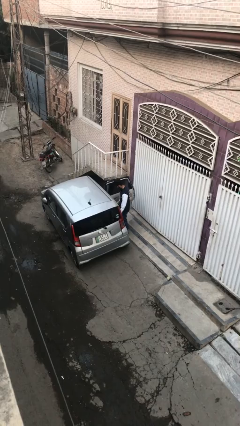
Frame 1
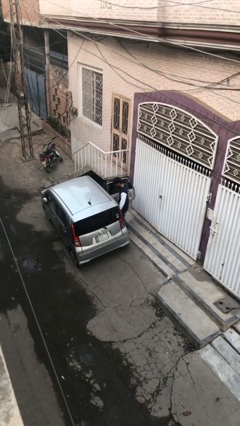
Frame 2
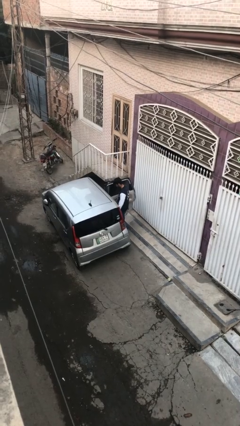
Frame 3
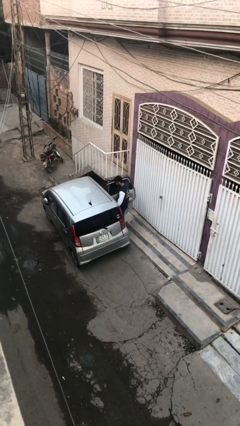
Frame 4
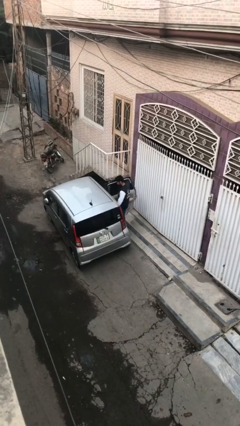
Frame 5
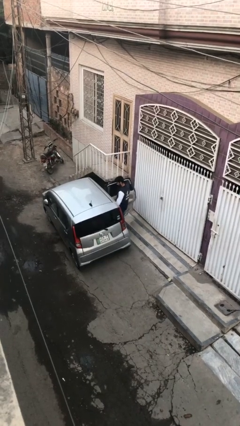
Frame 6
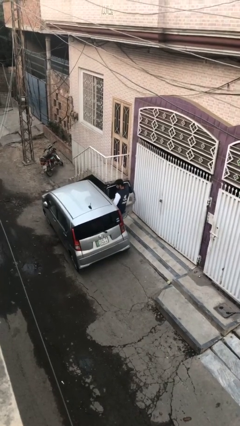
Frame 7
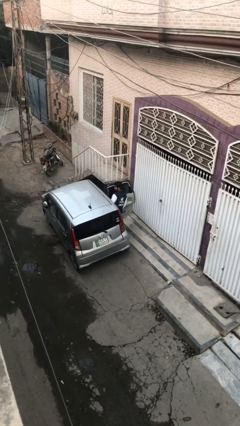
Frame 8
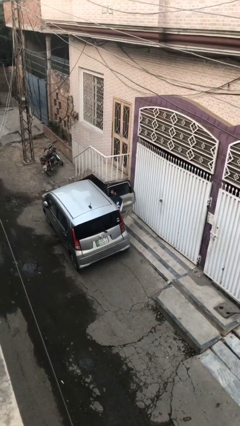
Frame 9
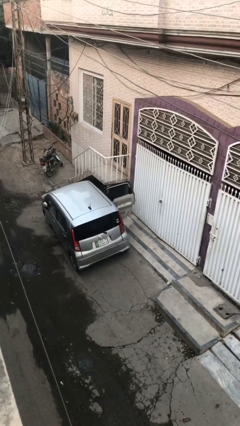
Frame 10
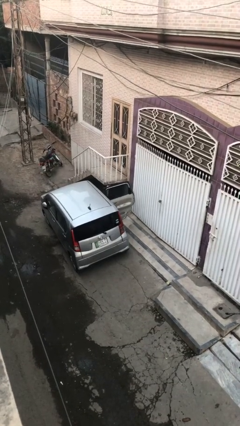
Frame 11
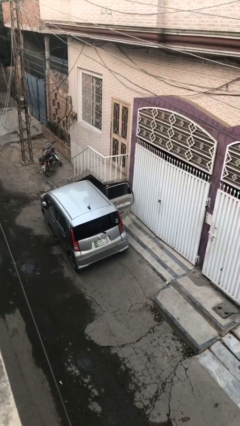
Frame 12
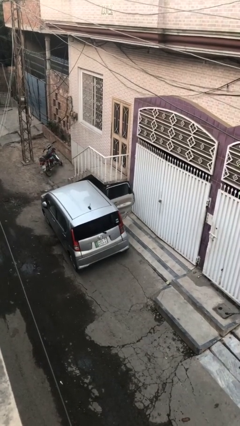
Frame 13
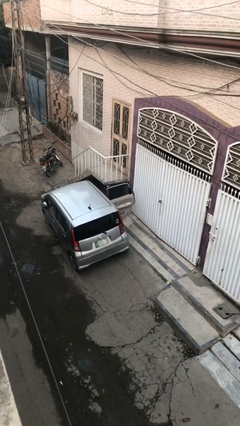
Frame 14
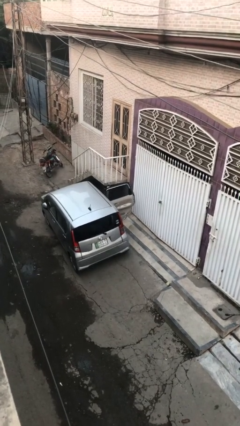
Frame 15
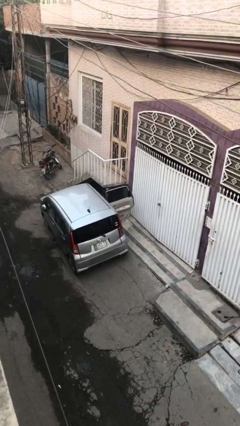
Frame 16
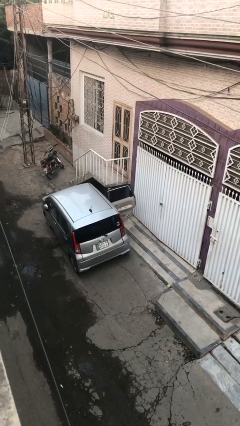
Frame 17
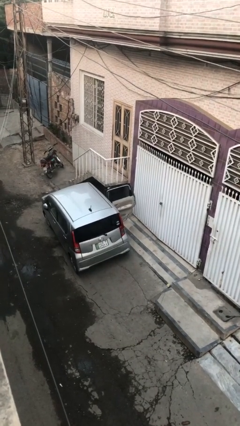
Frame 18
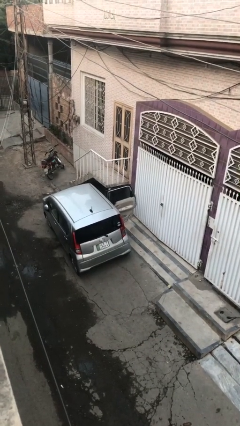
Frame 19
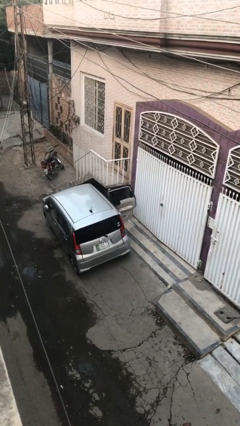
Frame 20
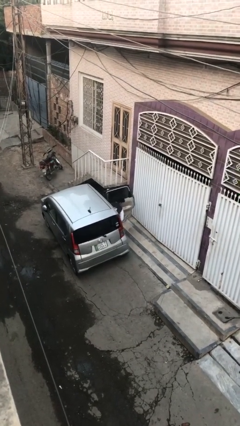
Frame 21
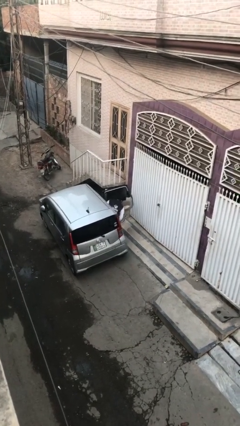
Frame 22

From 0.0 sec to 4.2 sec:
person enters car

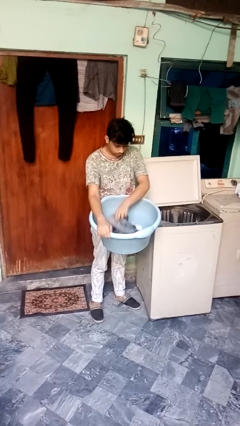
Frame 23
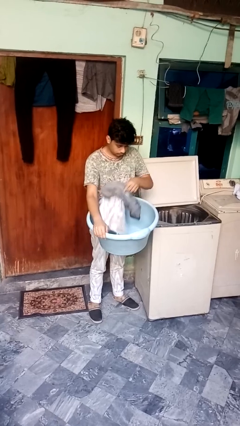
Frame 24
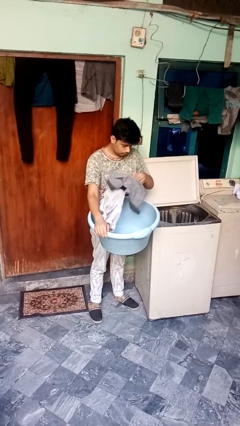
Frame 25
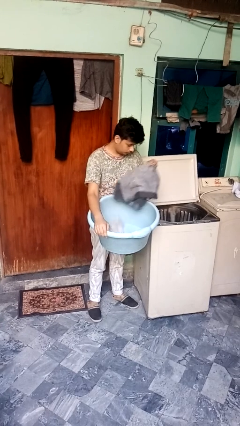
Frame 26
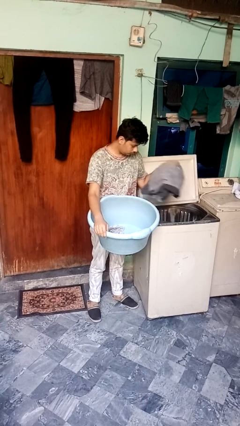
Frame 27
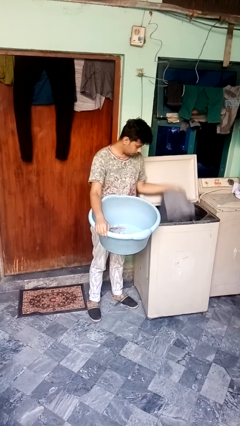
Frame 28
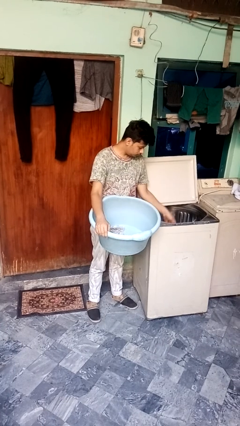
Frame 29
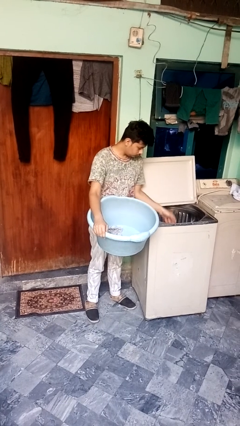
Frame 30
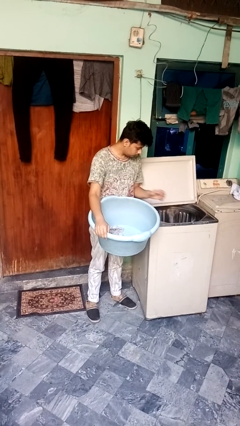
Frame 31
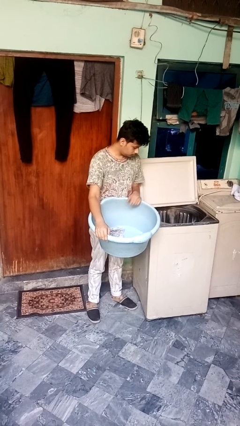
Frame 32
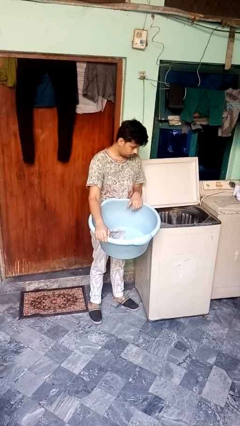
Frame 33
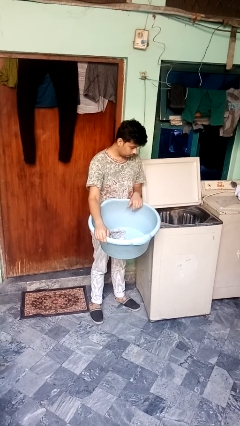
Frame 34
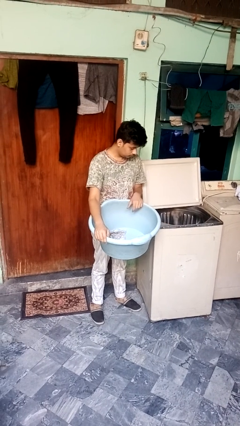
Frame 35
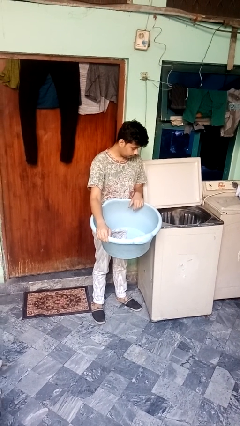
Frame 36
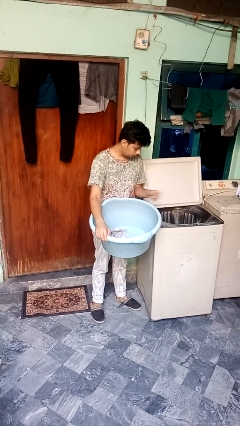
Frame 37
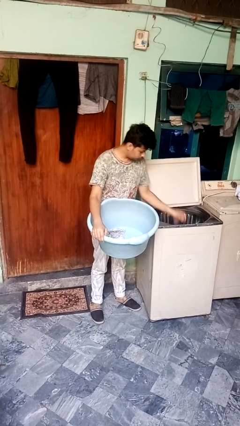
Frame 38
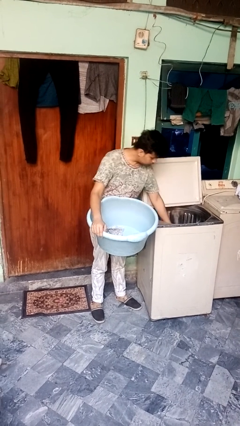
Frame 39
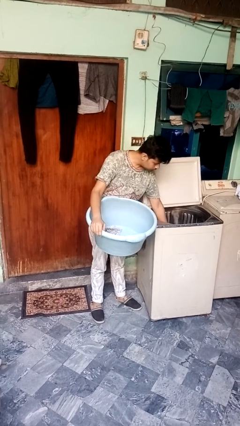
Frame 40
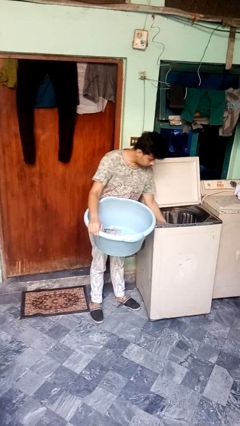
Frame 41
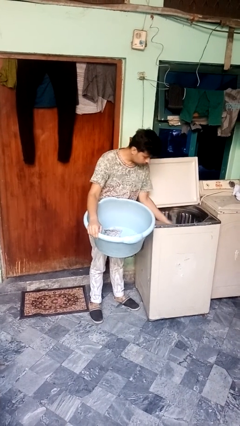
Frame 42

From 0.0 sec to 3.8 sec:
person unloads clotheswasher

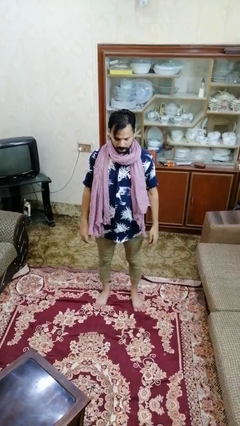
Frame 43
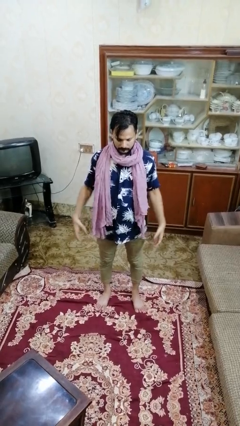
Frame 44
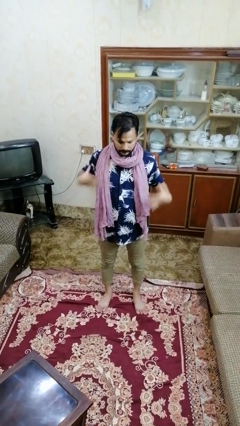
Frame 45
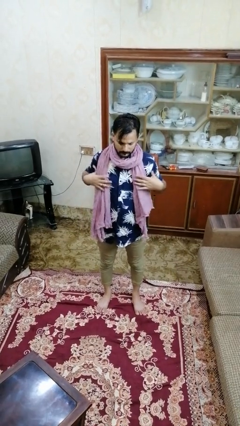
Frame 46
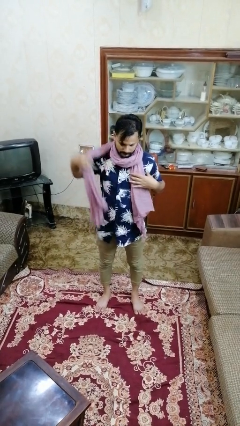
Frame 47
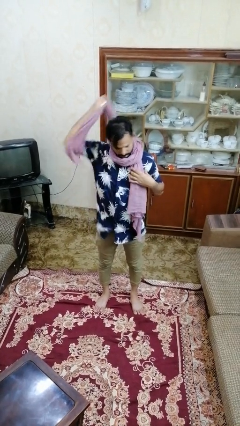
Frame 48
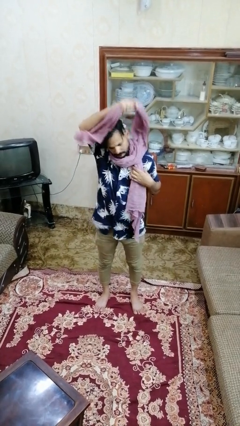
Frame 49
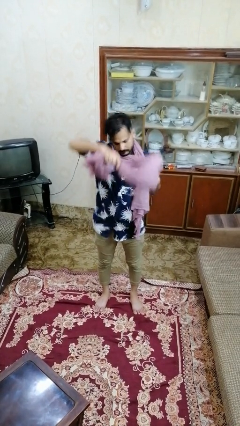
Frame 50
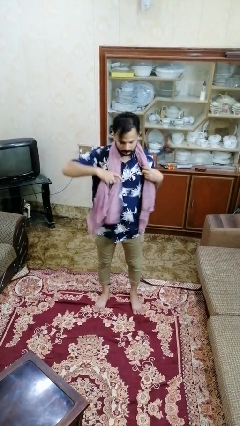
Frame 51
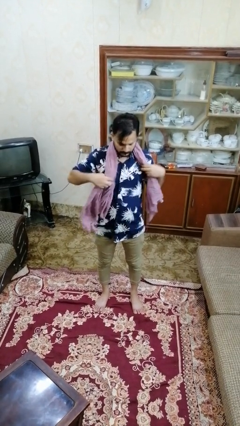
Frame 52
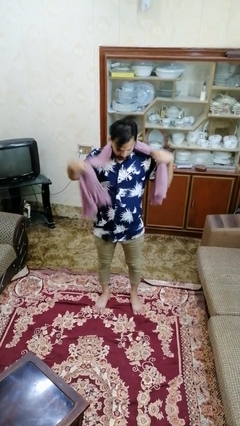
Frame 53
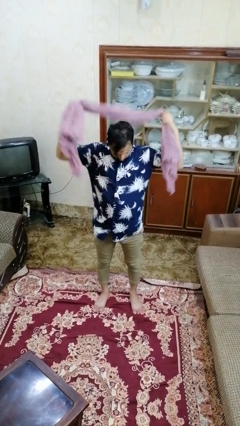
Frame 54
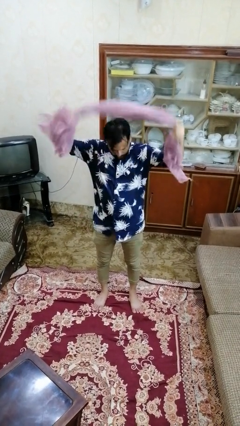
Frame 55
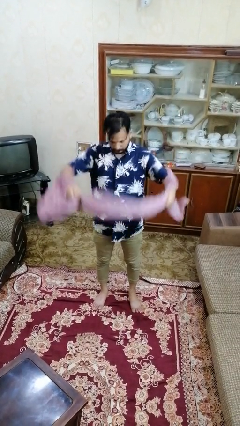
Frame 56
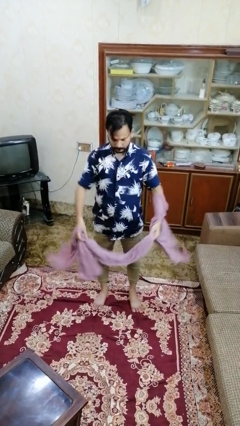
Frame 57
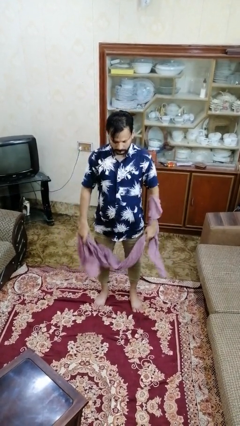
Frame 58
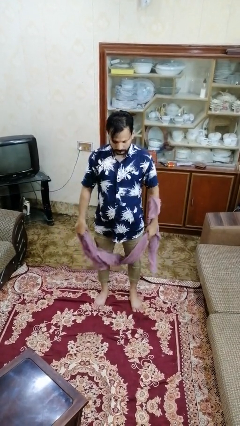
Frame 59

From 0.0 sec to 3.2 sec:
person takes off scarf

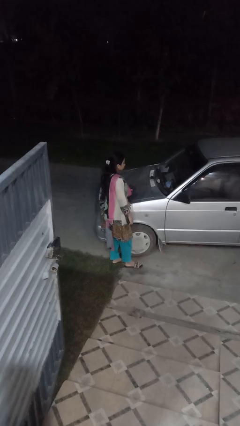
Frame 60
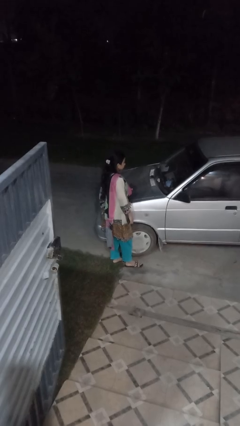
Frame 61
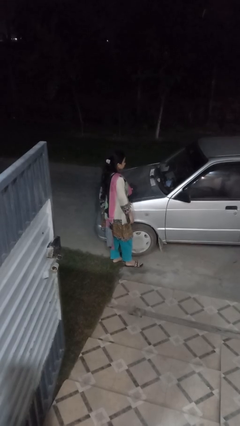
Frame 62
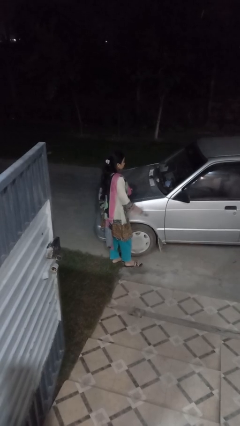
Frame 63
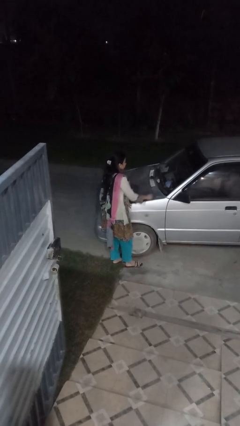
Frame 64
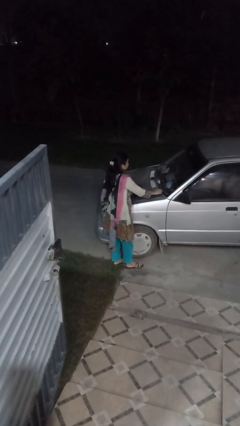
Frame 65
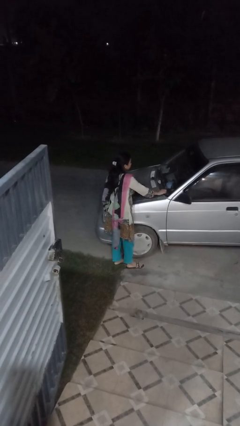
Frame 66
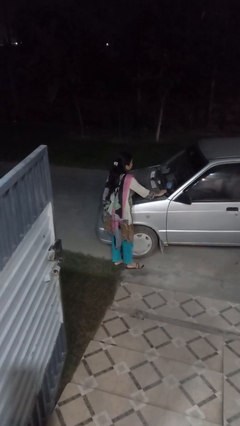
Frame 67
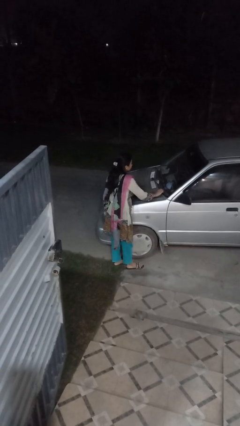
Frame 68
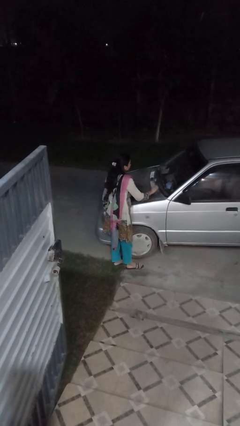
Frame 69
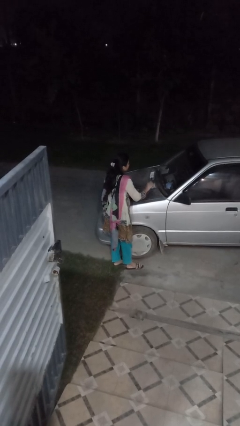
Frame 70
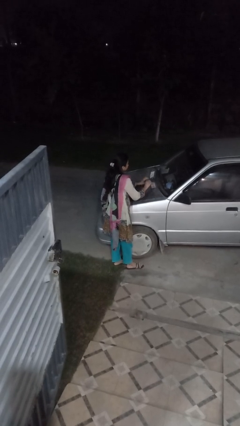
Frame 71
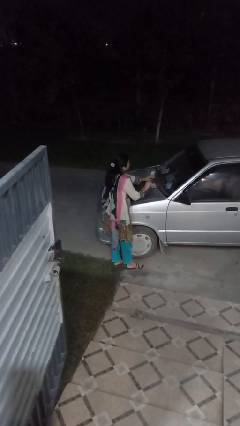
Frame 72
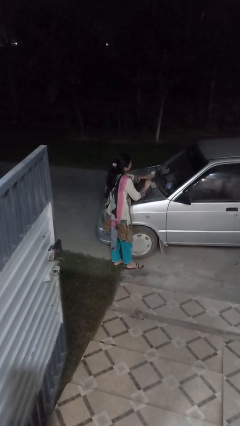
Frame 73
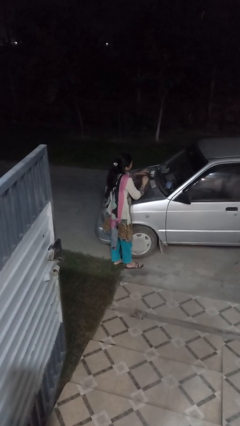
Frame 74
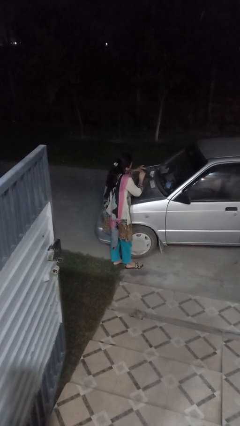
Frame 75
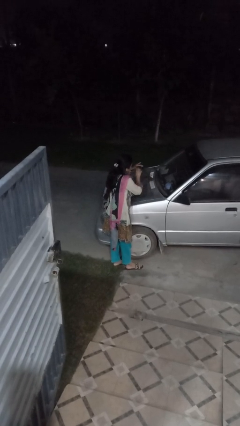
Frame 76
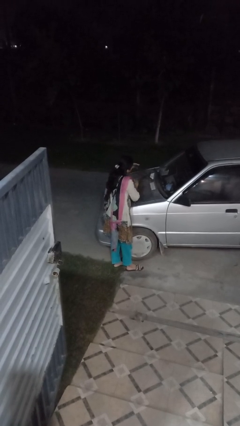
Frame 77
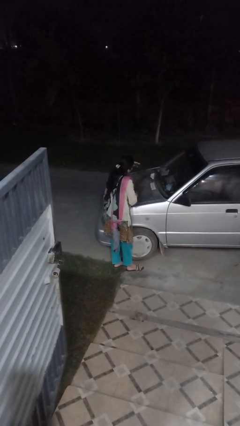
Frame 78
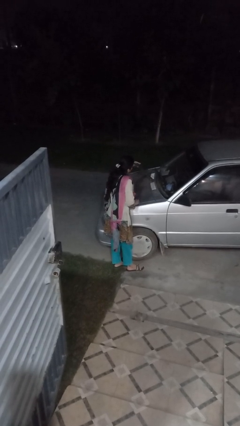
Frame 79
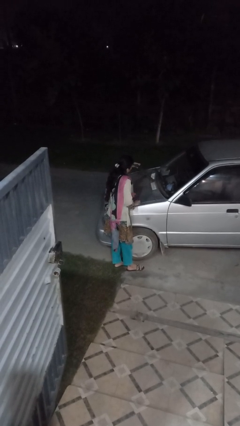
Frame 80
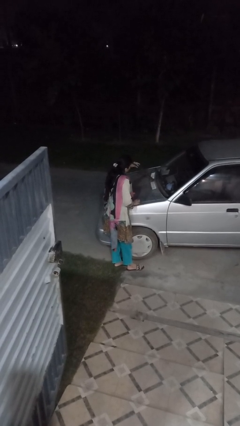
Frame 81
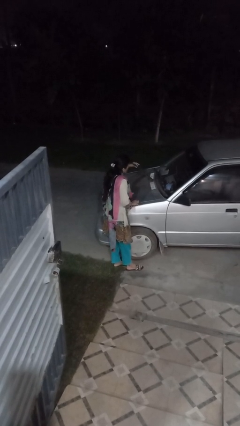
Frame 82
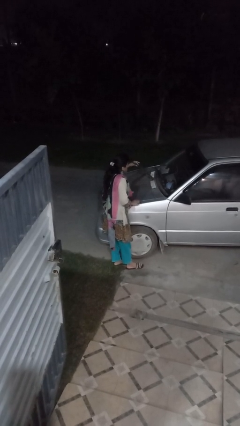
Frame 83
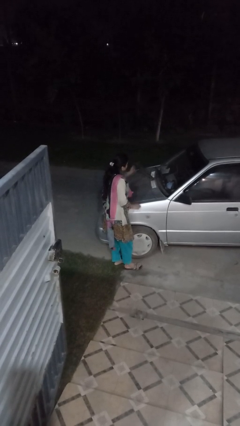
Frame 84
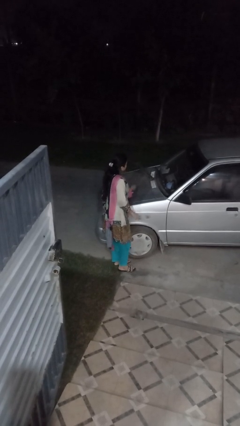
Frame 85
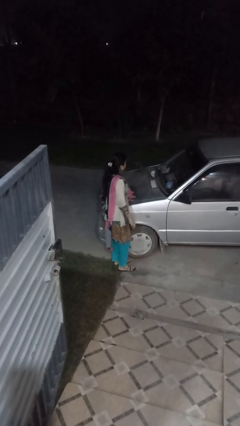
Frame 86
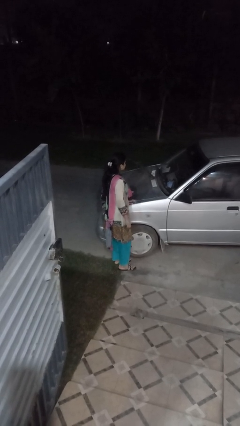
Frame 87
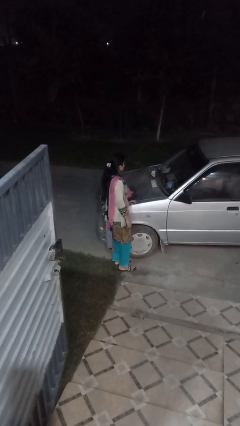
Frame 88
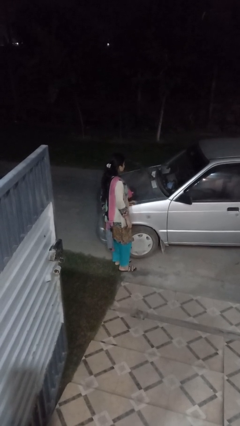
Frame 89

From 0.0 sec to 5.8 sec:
person flips up car wipers

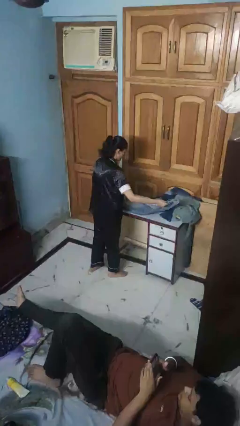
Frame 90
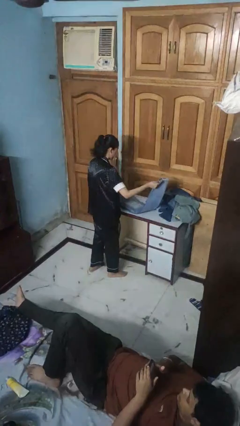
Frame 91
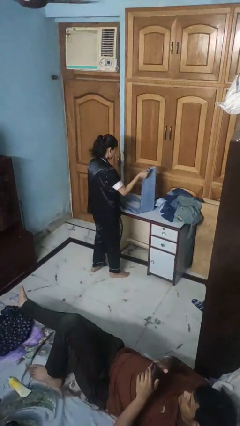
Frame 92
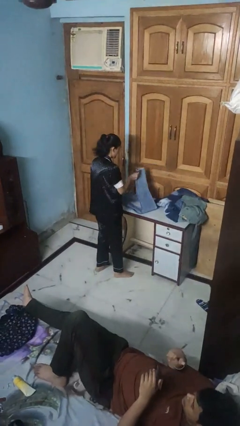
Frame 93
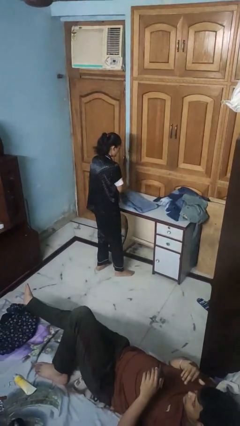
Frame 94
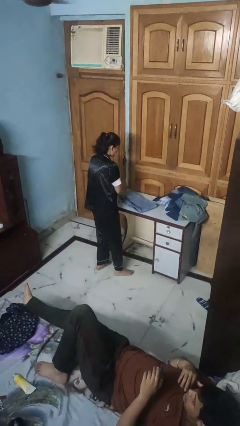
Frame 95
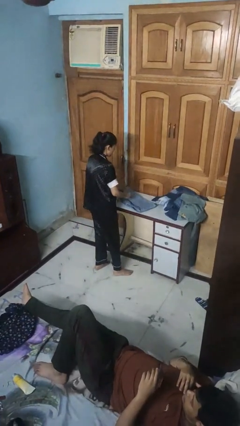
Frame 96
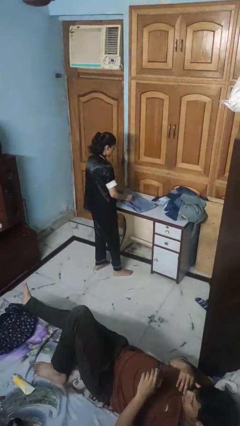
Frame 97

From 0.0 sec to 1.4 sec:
person folds pants
